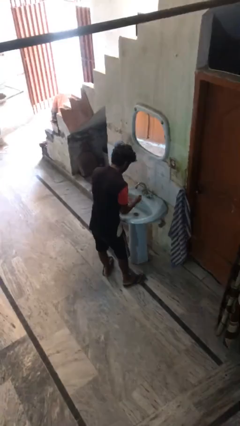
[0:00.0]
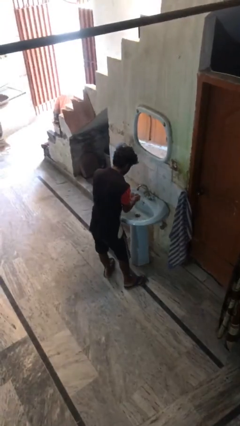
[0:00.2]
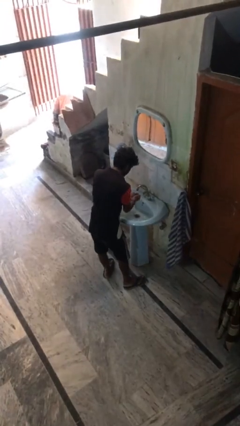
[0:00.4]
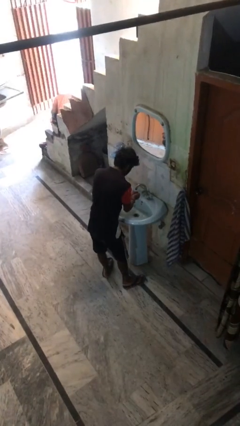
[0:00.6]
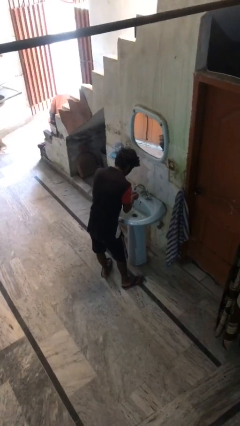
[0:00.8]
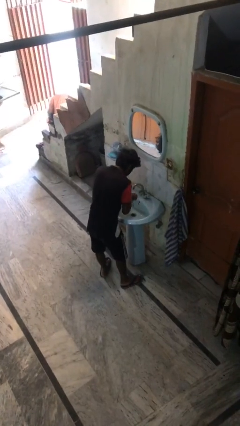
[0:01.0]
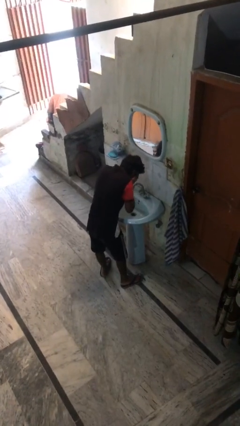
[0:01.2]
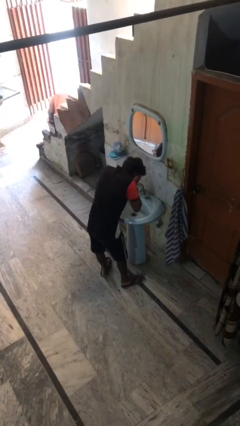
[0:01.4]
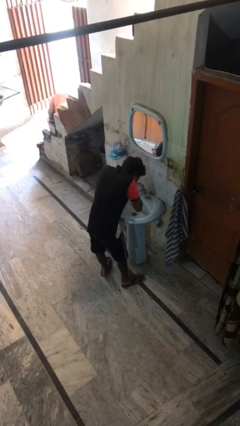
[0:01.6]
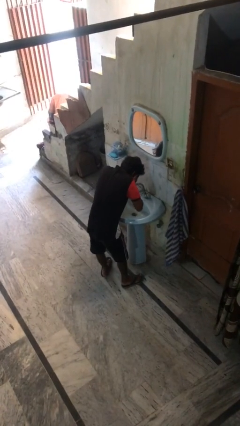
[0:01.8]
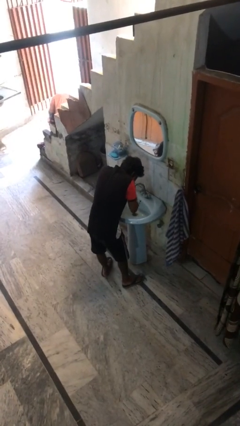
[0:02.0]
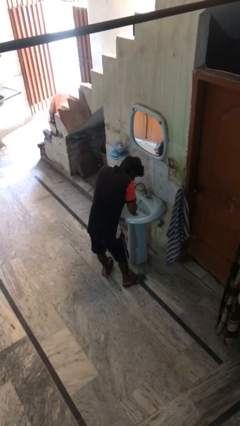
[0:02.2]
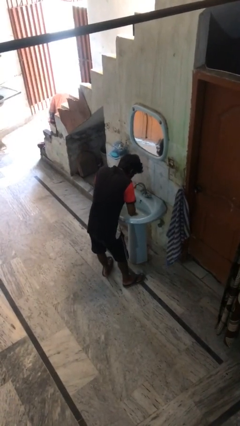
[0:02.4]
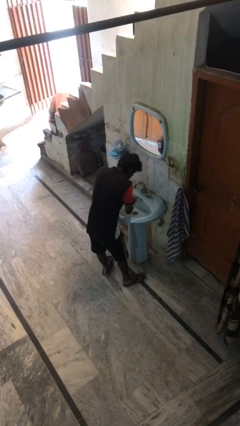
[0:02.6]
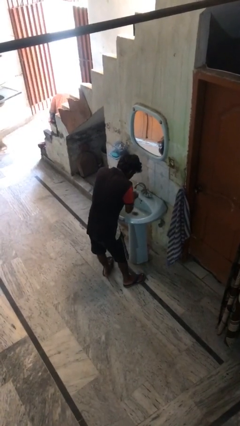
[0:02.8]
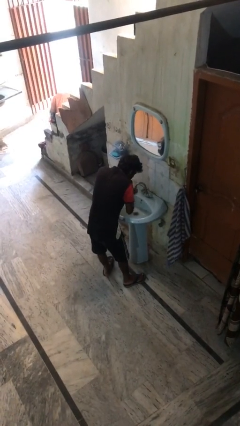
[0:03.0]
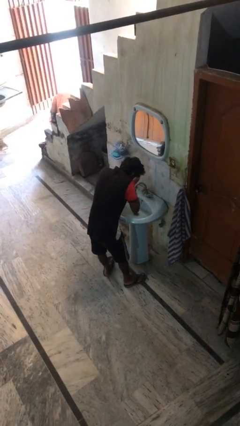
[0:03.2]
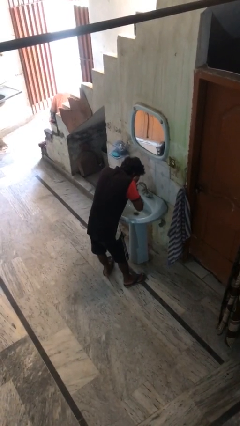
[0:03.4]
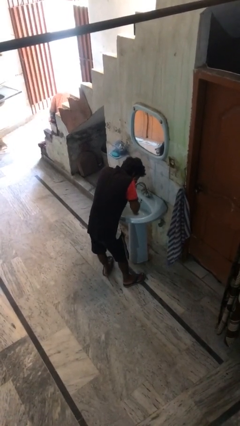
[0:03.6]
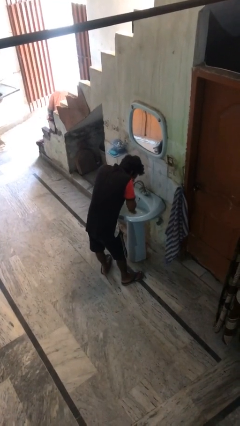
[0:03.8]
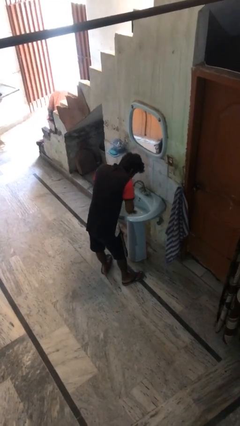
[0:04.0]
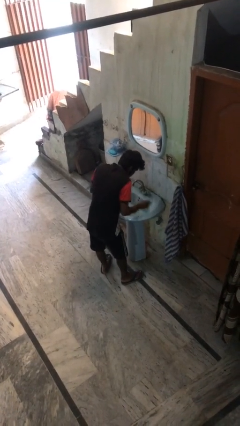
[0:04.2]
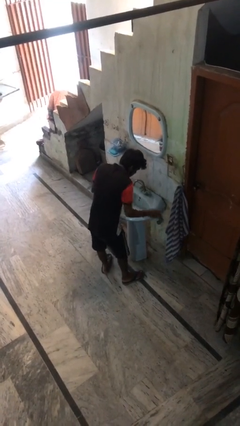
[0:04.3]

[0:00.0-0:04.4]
person washes face

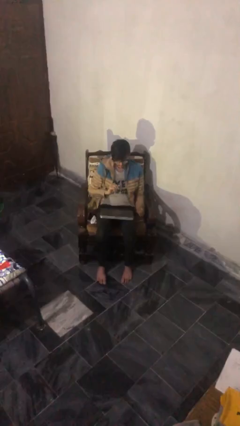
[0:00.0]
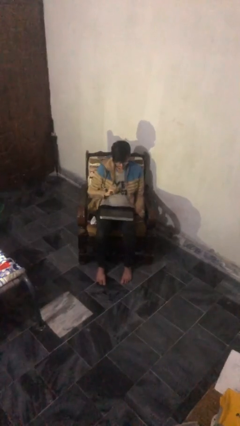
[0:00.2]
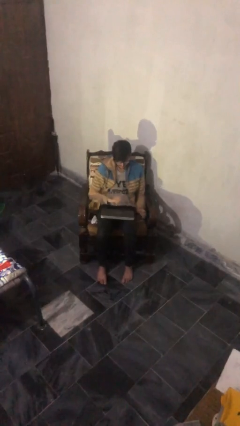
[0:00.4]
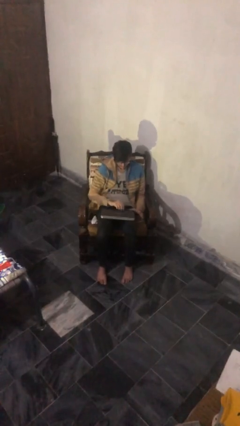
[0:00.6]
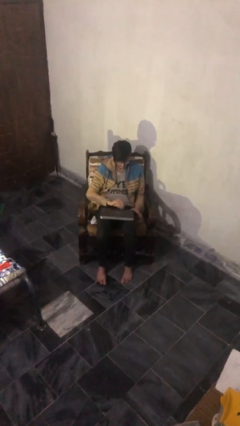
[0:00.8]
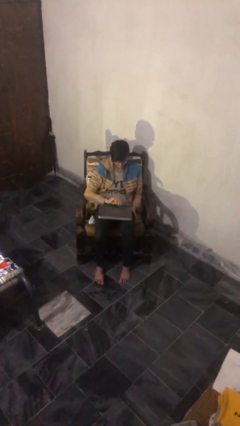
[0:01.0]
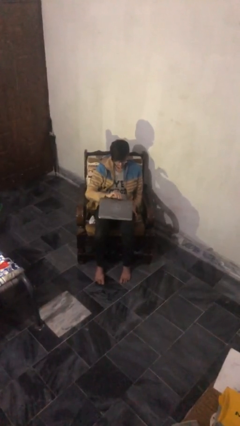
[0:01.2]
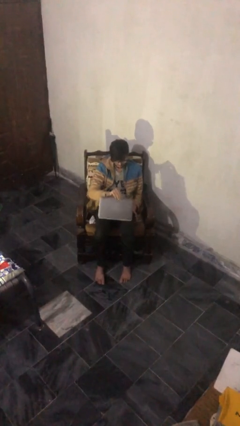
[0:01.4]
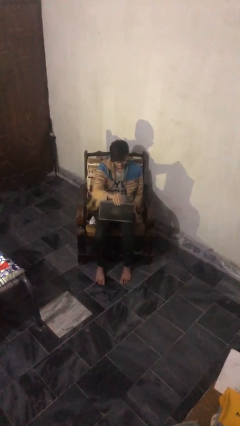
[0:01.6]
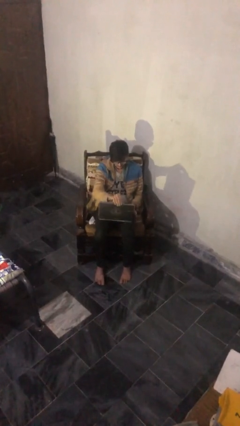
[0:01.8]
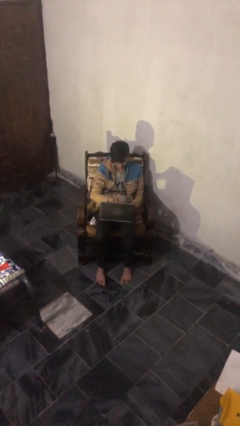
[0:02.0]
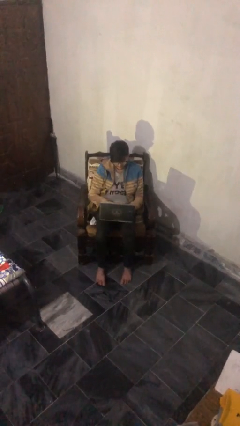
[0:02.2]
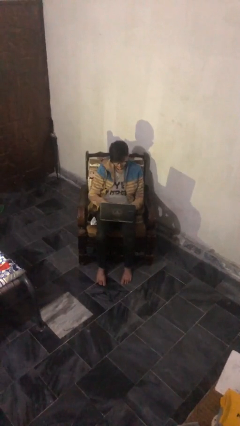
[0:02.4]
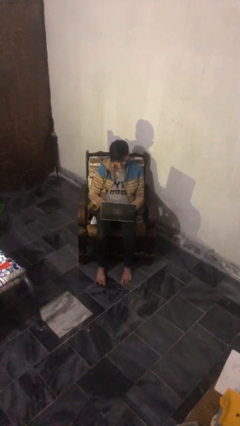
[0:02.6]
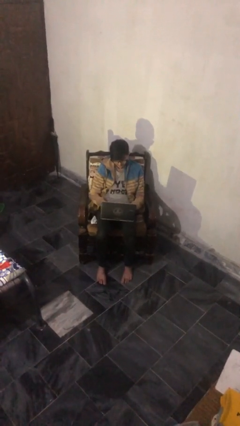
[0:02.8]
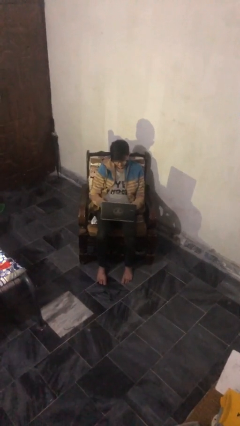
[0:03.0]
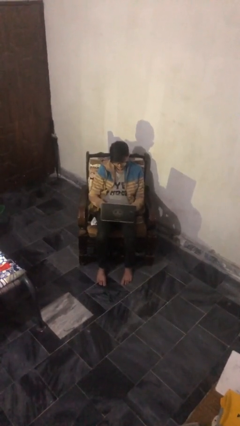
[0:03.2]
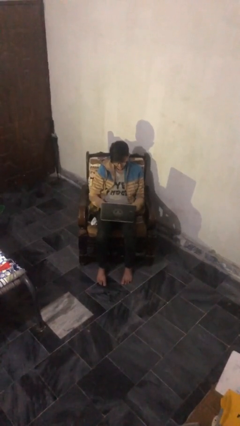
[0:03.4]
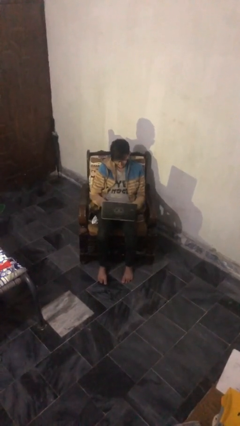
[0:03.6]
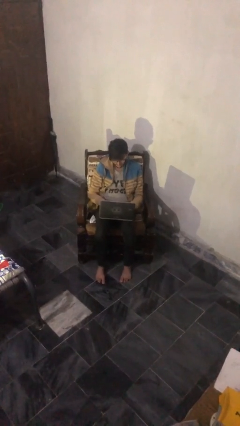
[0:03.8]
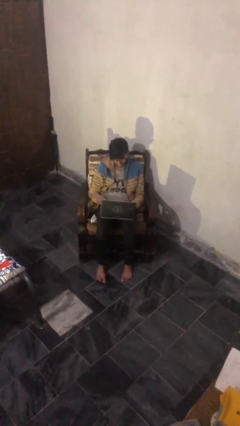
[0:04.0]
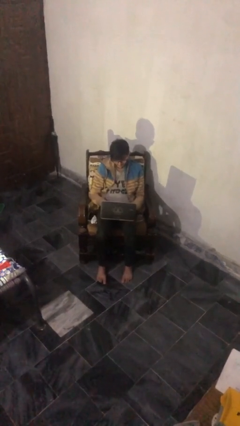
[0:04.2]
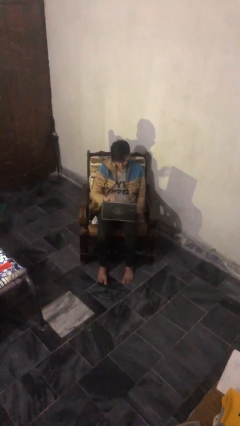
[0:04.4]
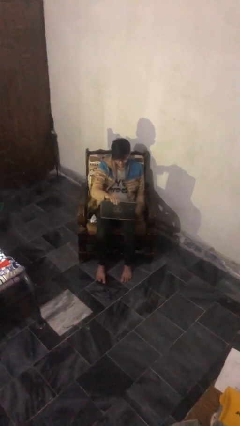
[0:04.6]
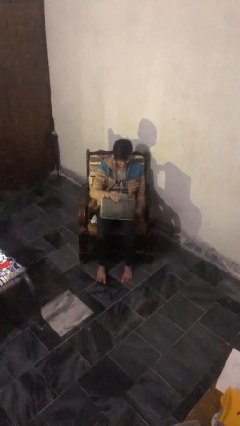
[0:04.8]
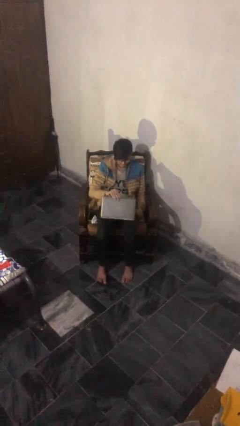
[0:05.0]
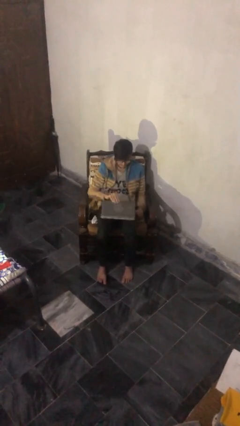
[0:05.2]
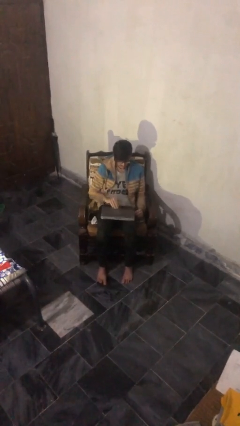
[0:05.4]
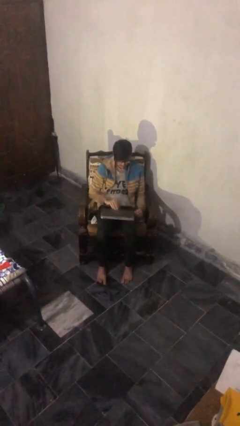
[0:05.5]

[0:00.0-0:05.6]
person interacts with laptop

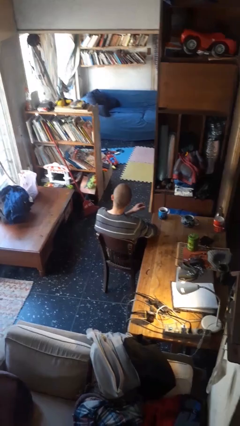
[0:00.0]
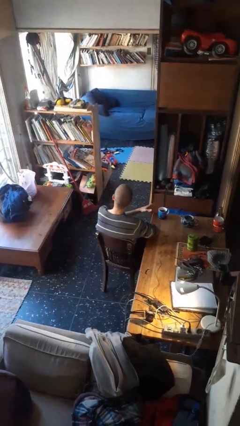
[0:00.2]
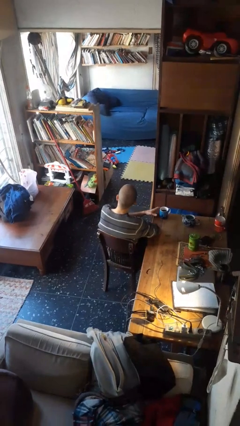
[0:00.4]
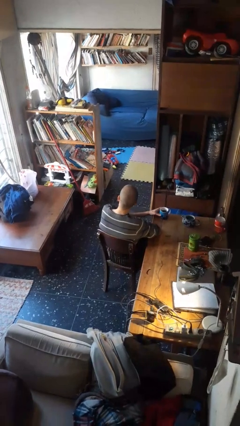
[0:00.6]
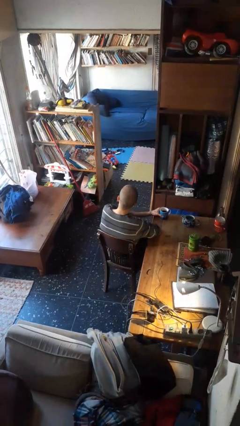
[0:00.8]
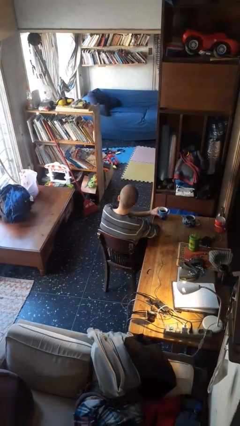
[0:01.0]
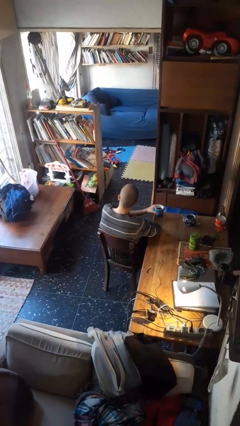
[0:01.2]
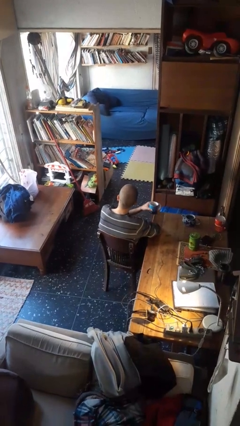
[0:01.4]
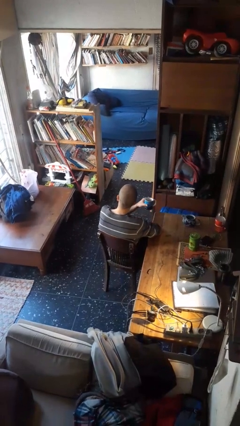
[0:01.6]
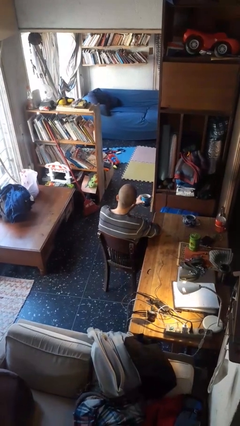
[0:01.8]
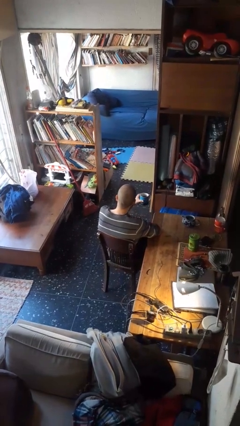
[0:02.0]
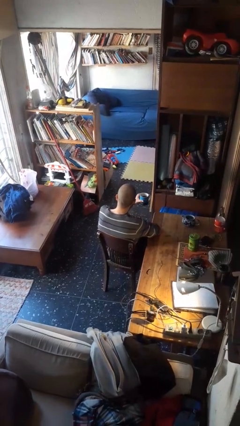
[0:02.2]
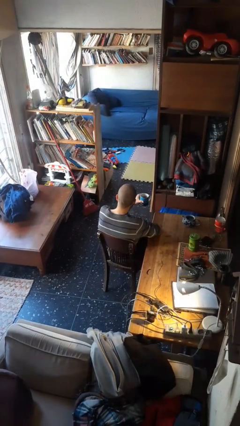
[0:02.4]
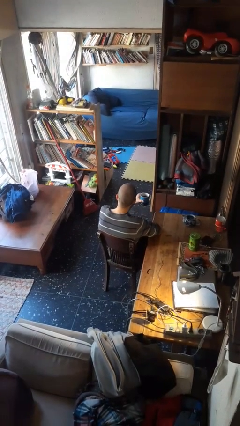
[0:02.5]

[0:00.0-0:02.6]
person picks up object from table

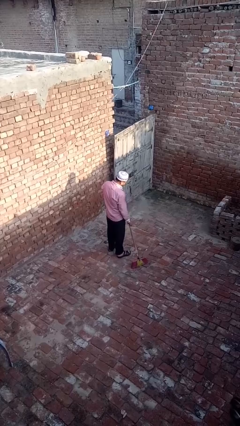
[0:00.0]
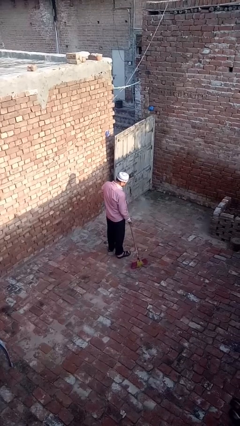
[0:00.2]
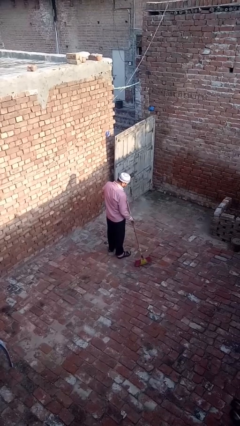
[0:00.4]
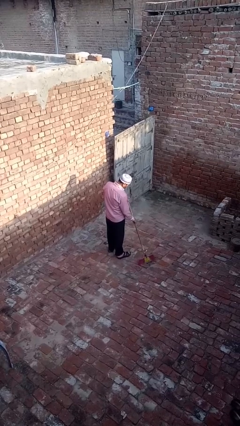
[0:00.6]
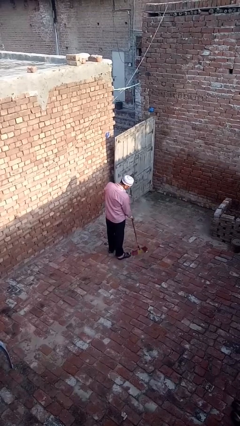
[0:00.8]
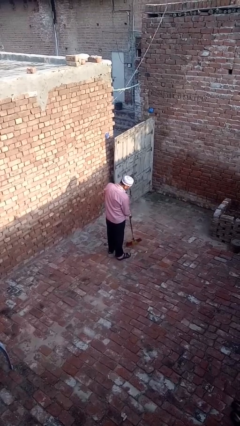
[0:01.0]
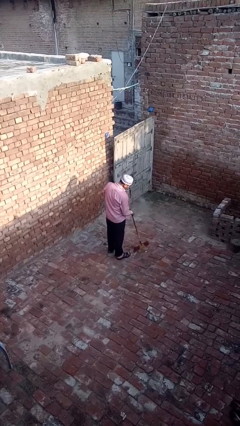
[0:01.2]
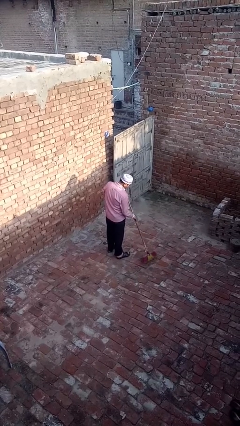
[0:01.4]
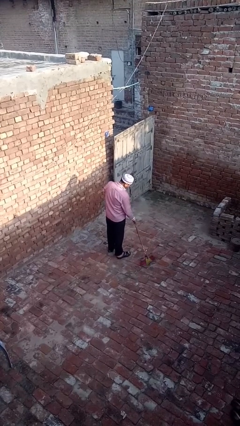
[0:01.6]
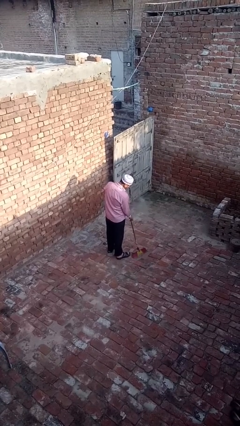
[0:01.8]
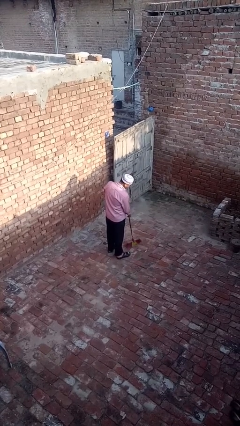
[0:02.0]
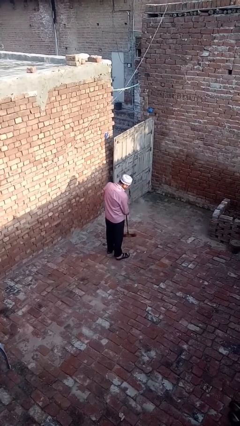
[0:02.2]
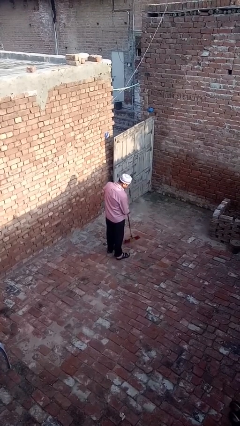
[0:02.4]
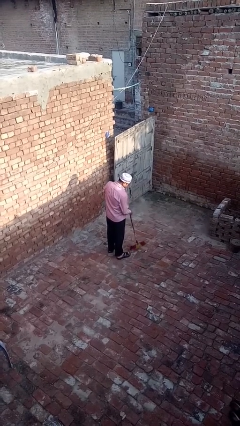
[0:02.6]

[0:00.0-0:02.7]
person sweeps floor

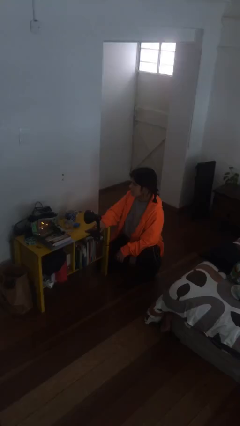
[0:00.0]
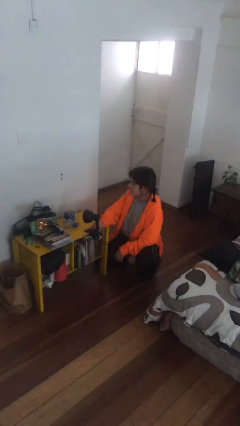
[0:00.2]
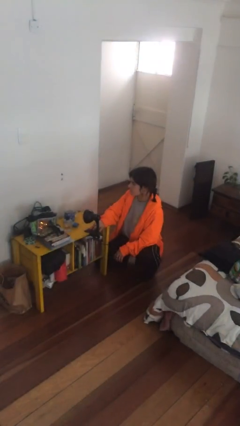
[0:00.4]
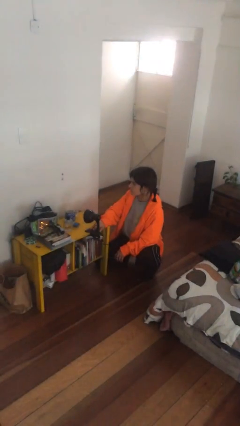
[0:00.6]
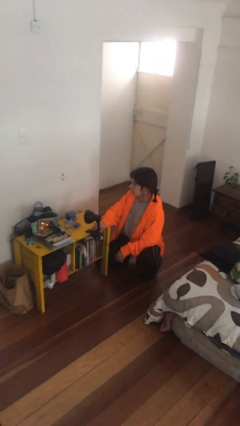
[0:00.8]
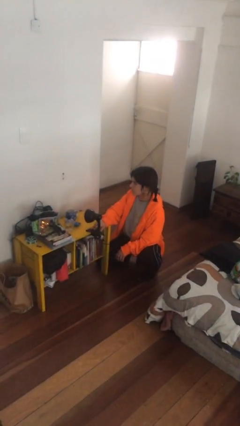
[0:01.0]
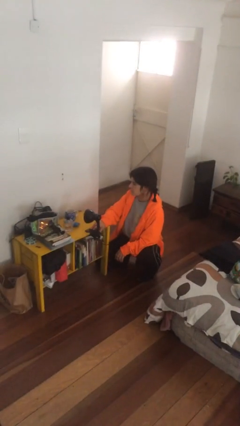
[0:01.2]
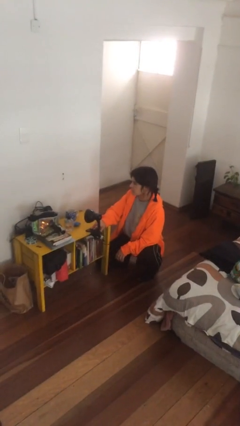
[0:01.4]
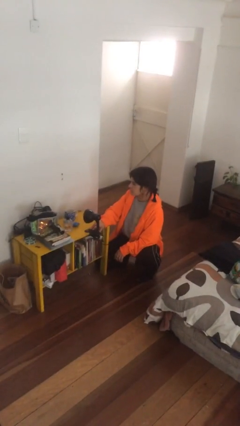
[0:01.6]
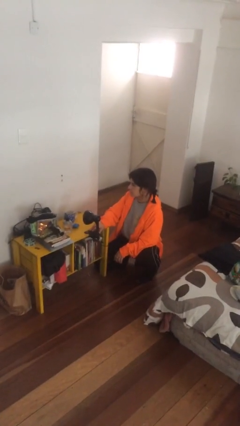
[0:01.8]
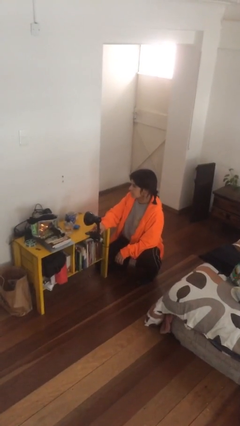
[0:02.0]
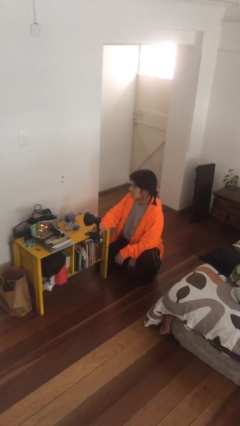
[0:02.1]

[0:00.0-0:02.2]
person turns off lamp
